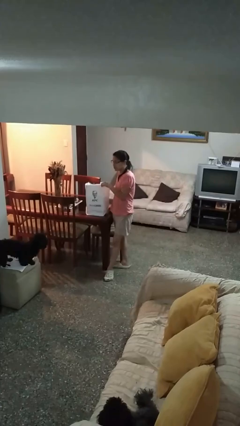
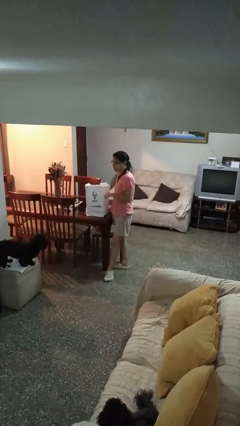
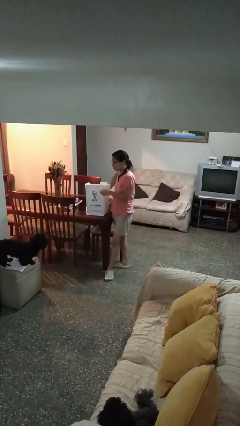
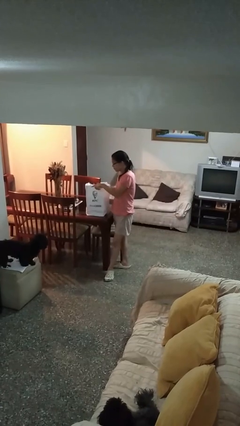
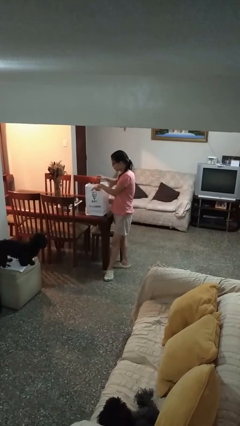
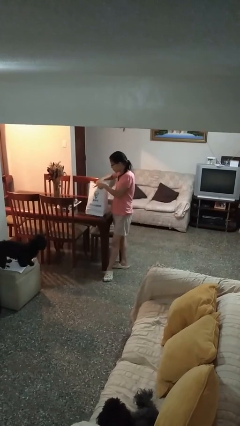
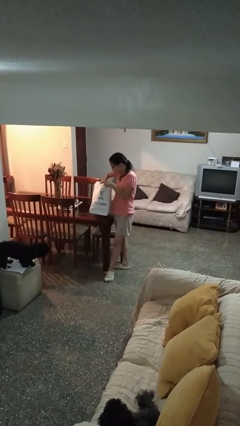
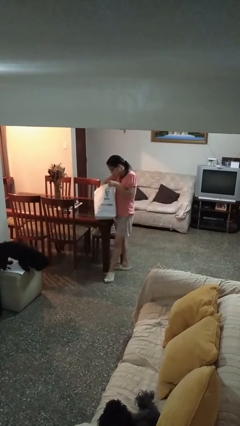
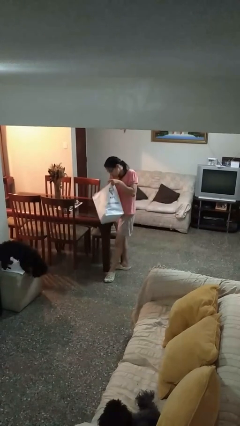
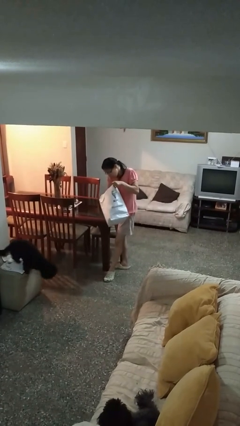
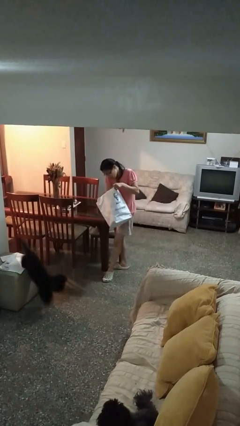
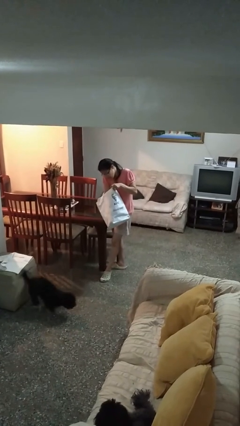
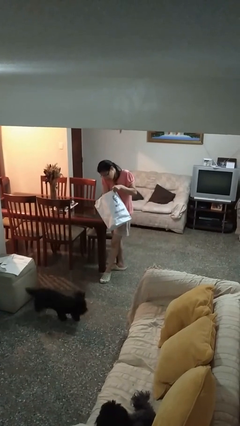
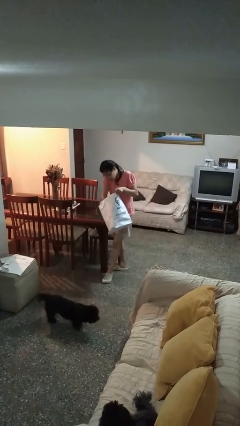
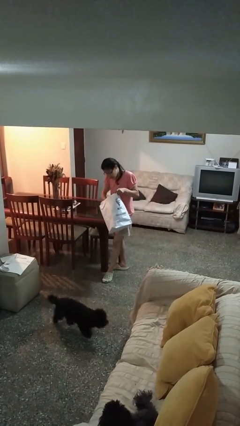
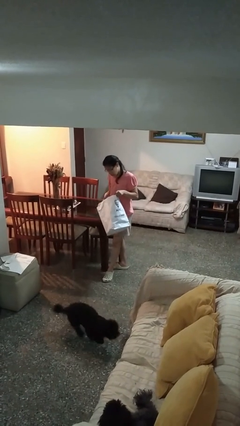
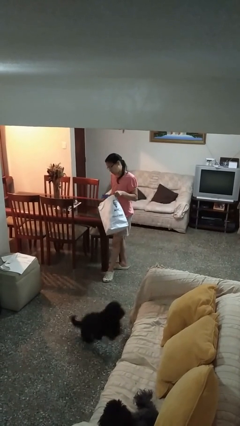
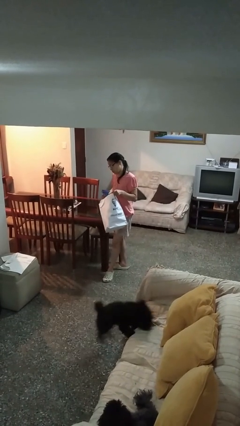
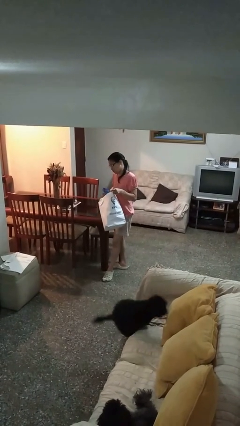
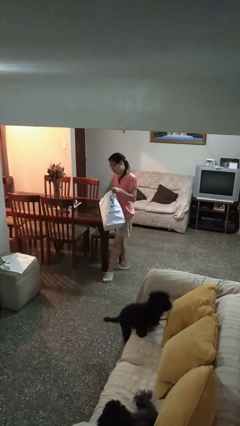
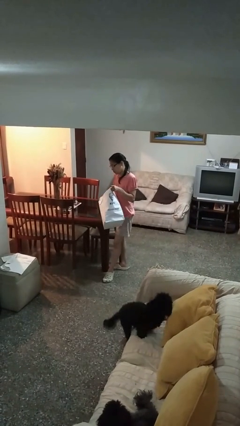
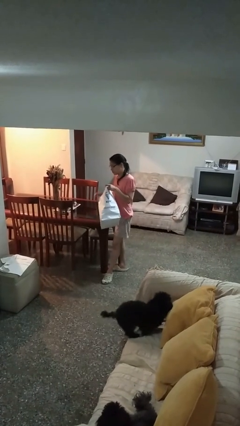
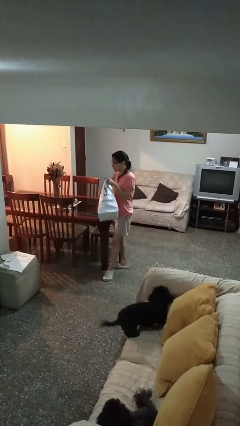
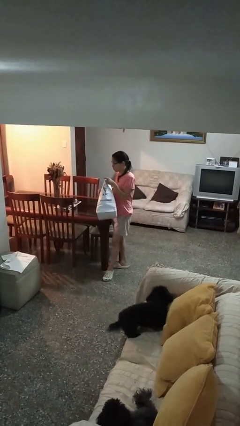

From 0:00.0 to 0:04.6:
person searches in bag

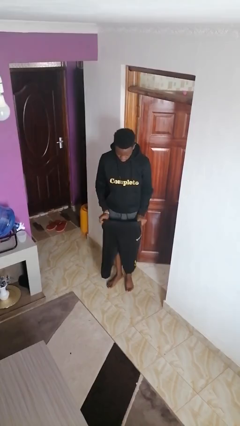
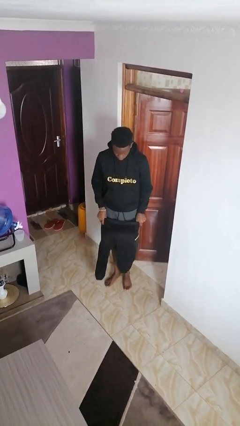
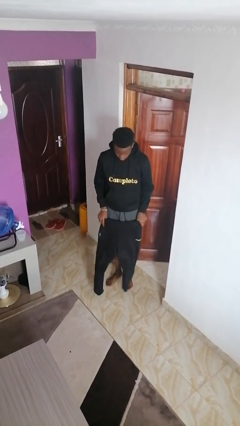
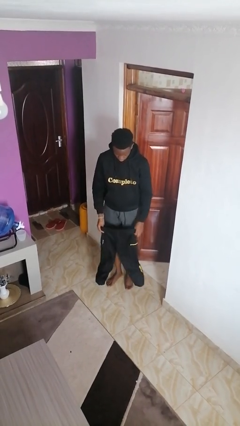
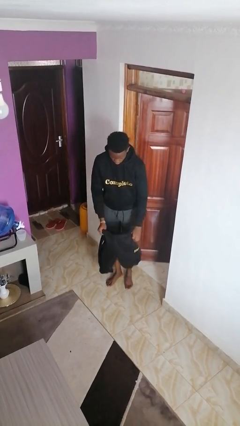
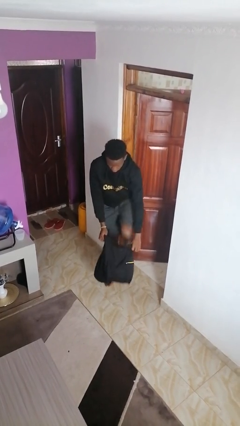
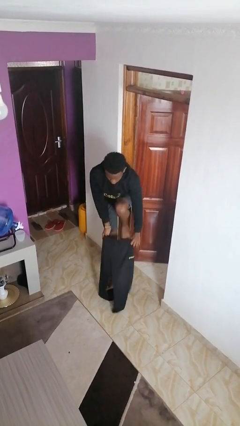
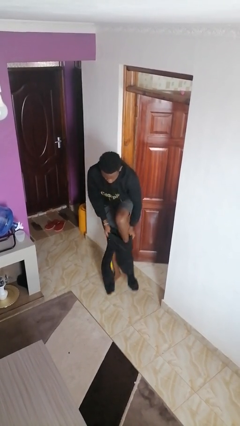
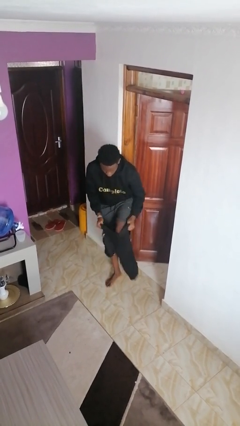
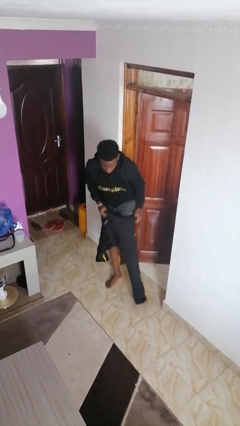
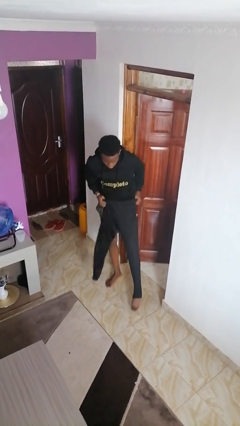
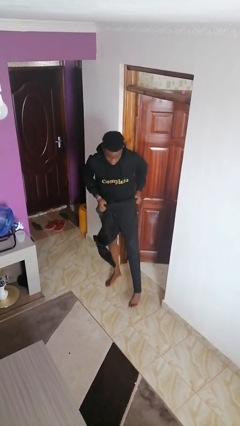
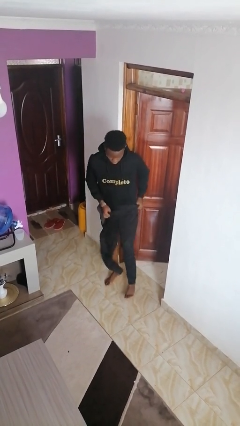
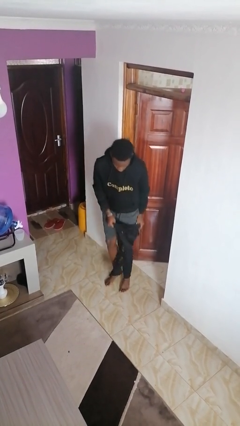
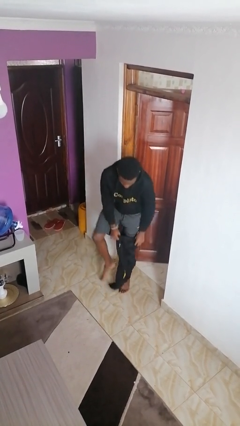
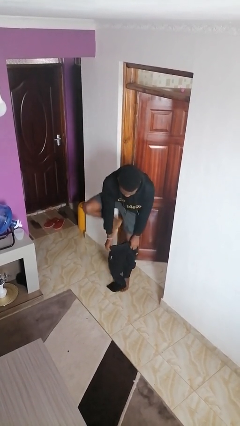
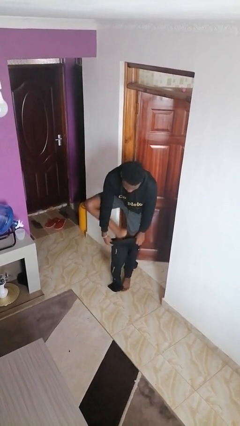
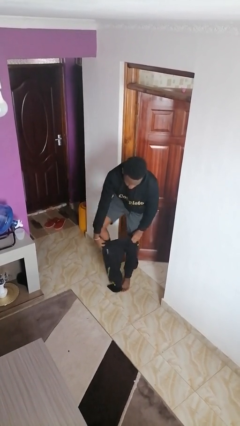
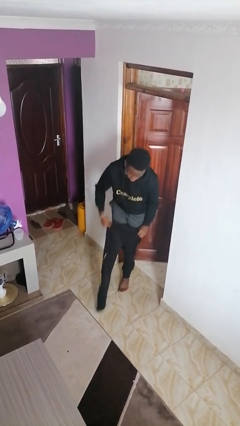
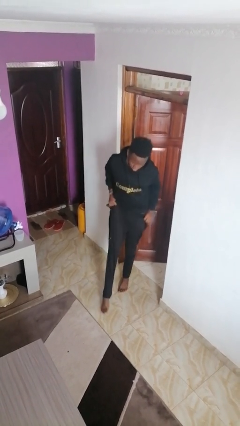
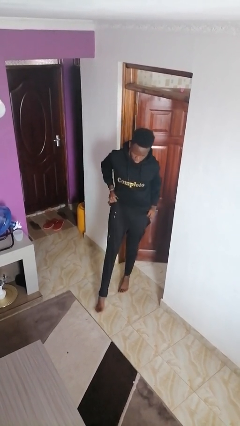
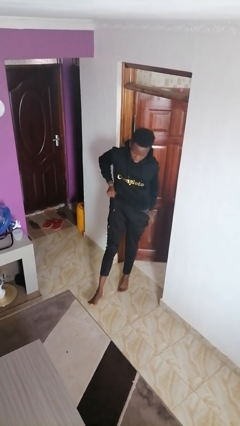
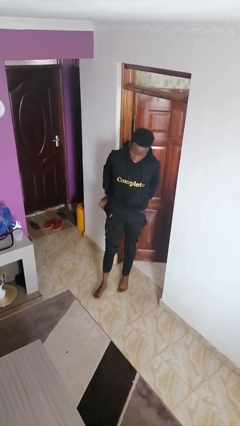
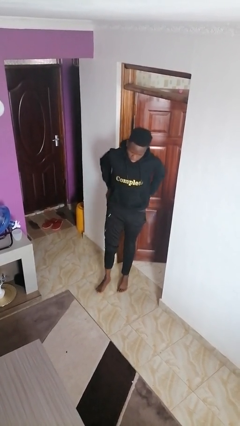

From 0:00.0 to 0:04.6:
person puts on pants

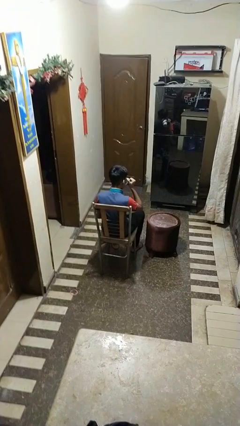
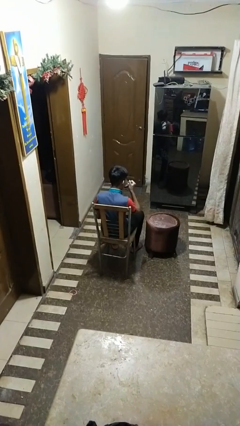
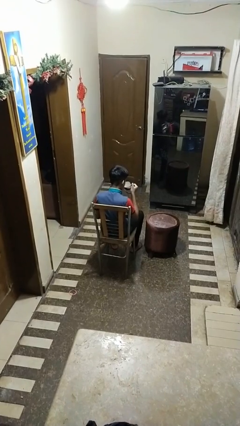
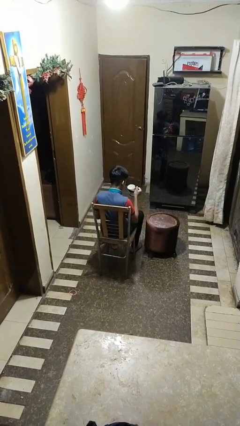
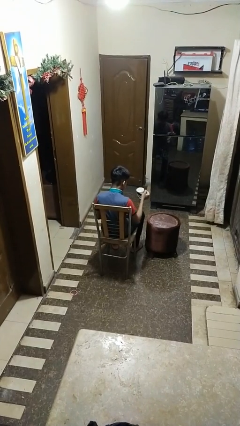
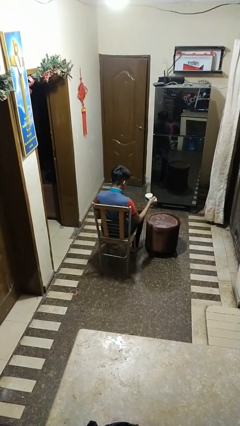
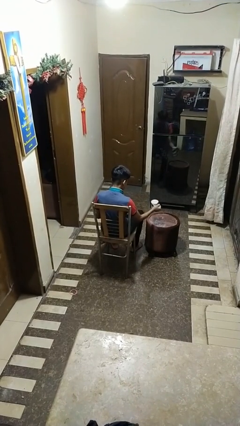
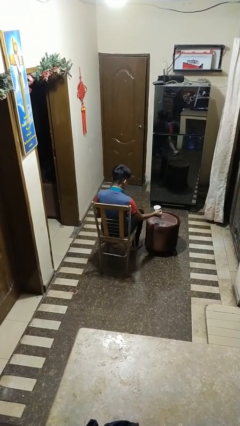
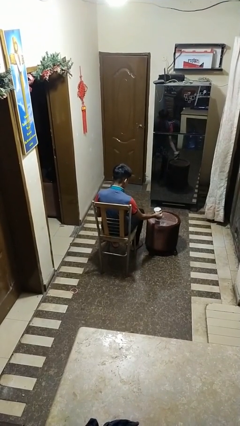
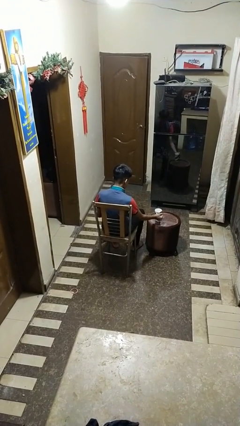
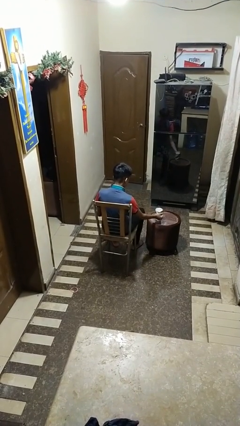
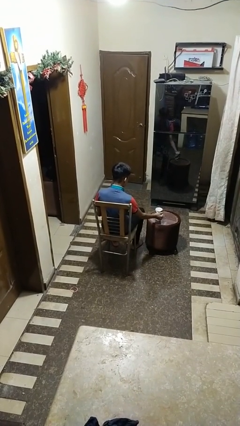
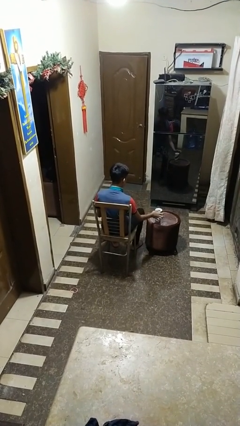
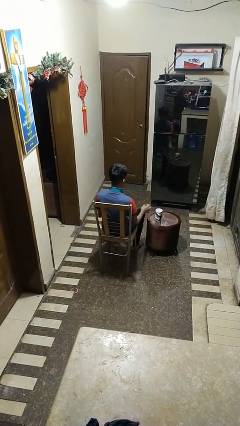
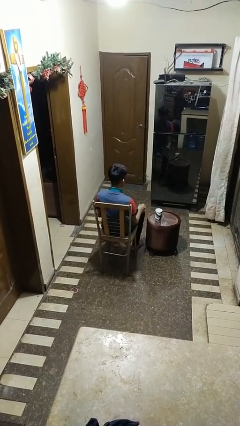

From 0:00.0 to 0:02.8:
person puts down object on table

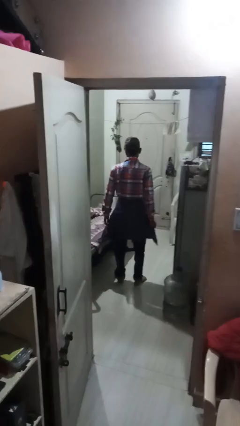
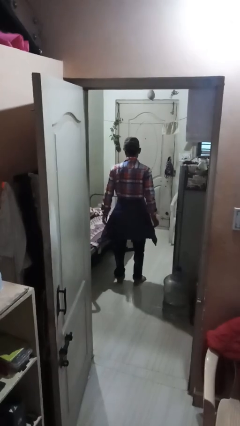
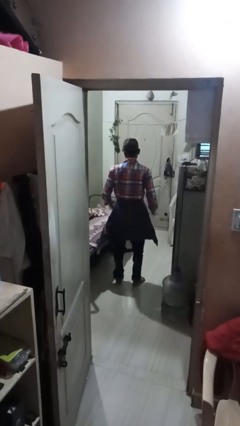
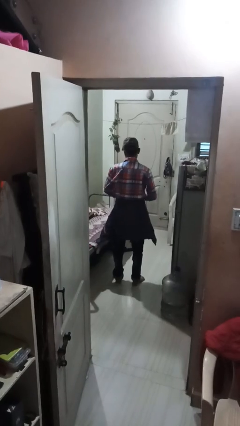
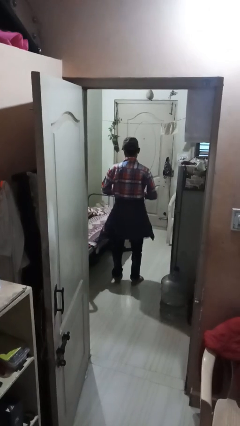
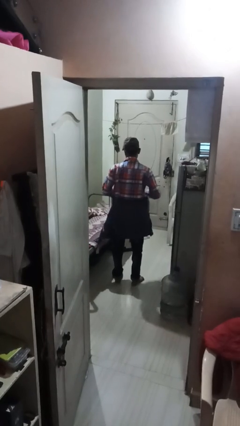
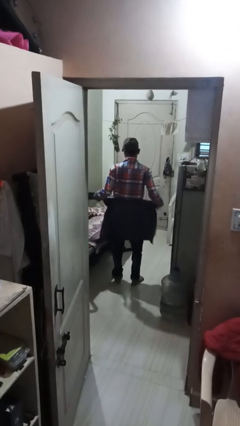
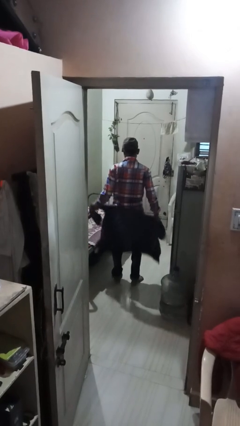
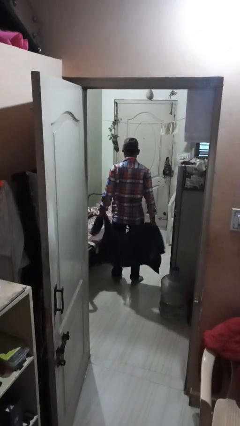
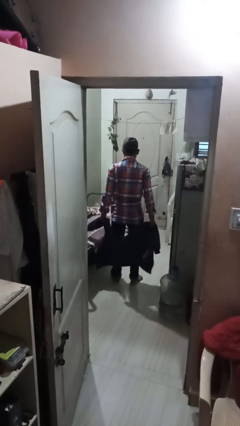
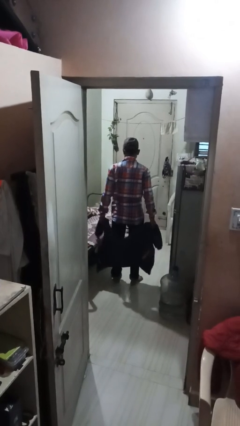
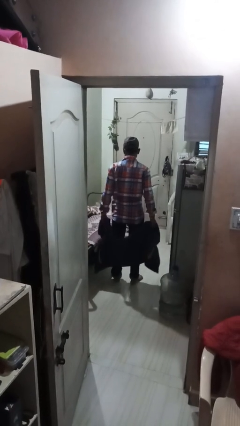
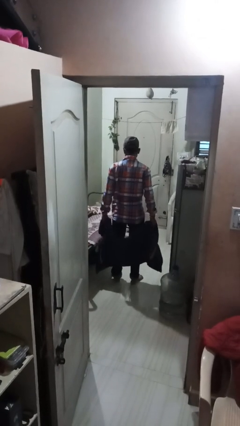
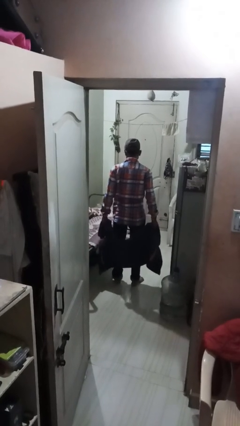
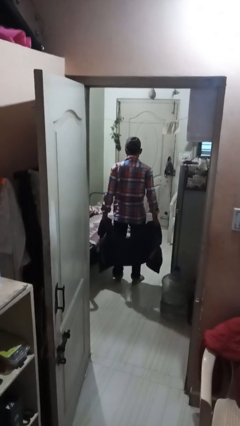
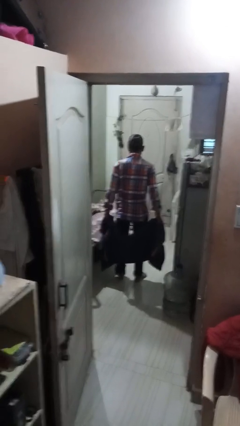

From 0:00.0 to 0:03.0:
person unties jacket around waist

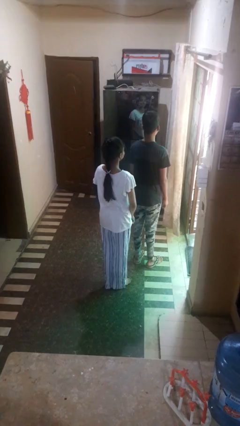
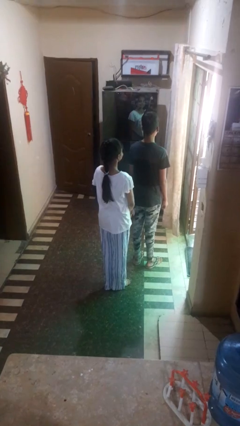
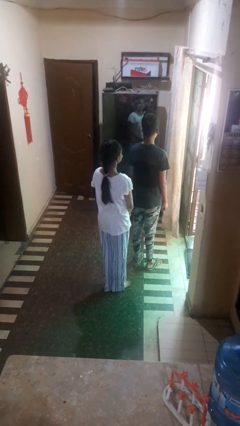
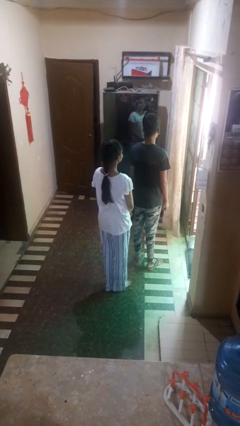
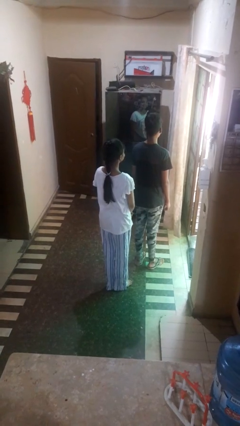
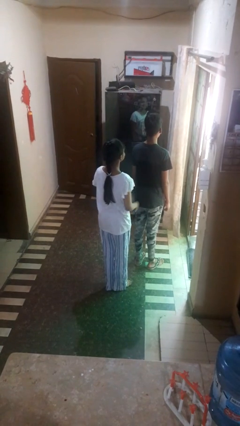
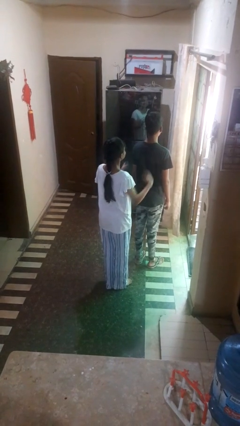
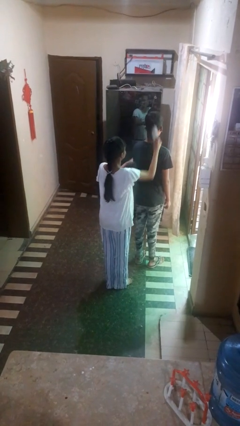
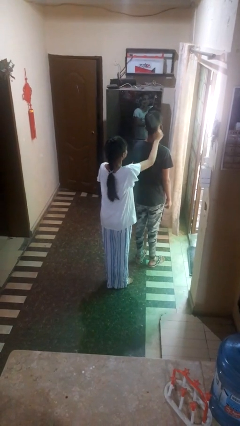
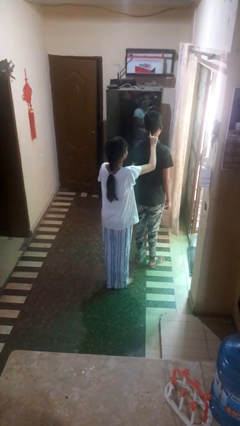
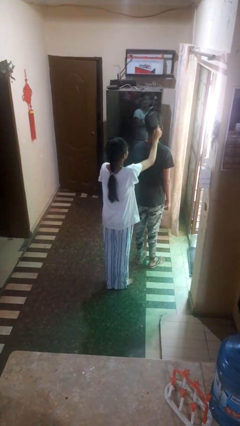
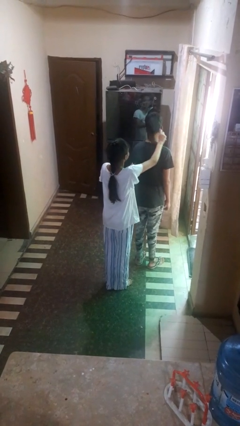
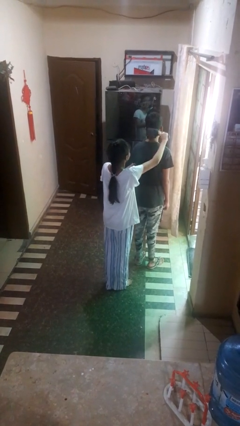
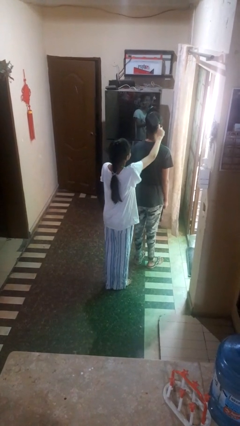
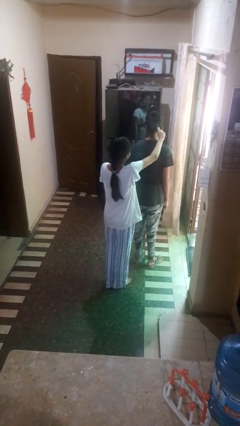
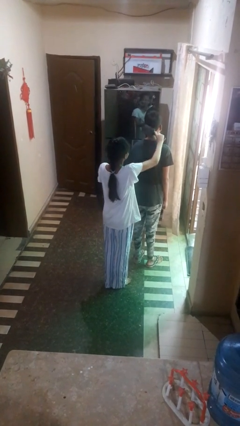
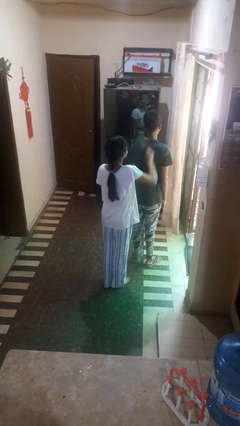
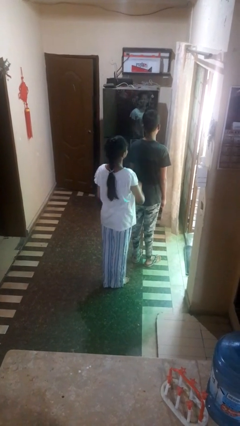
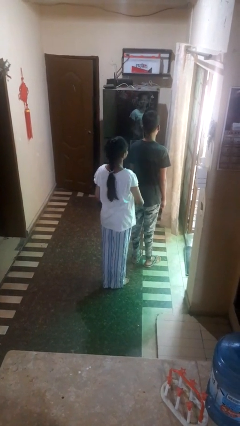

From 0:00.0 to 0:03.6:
person brushes hair of person
